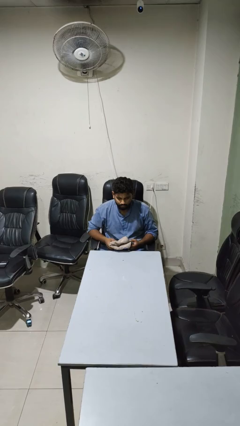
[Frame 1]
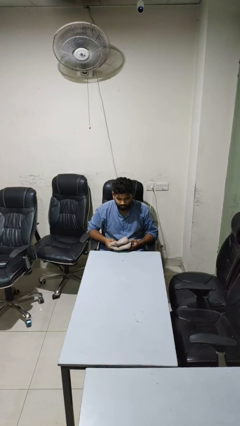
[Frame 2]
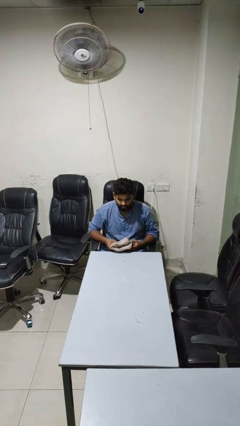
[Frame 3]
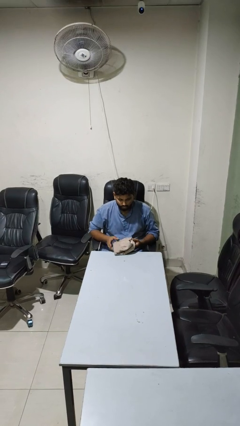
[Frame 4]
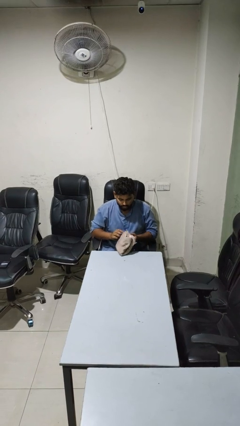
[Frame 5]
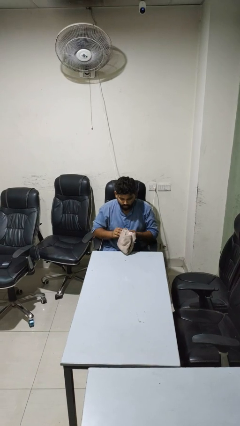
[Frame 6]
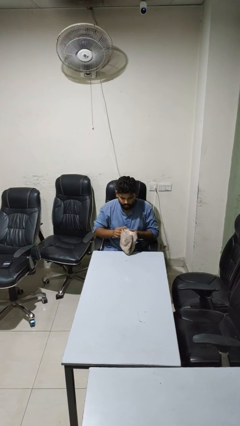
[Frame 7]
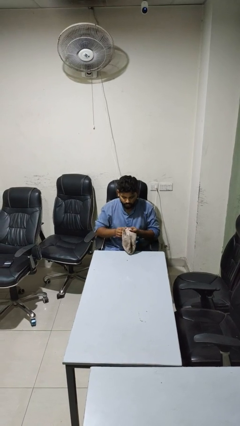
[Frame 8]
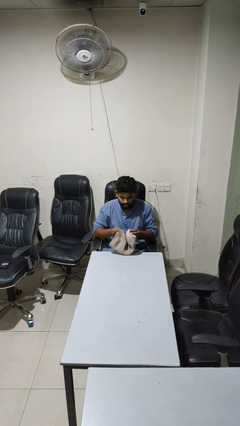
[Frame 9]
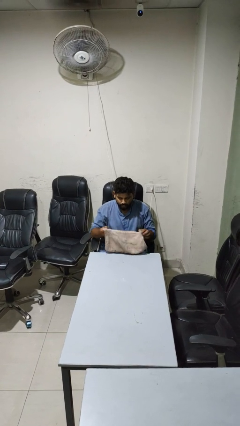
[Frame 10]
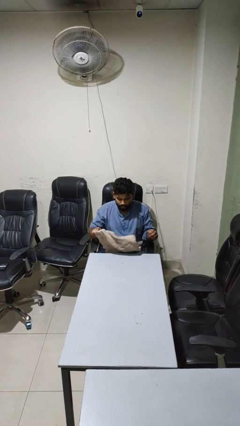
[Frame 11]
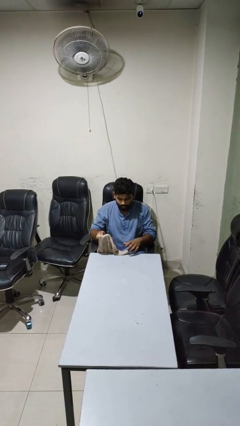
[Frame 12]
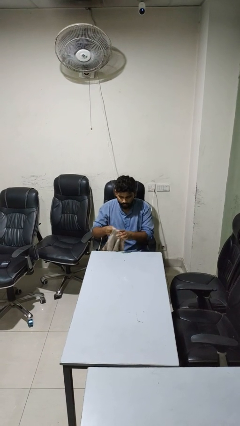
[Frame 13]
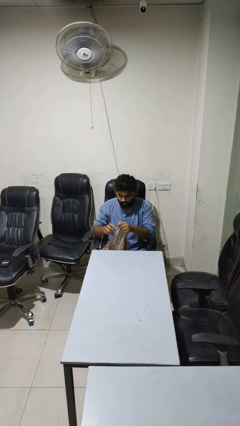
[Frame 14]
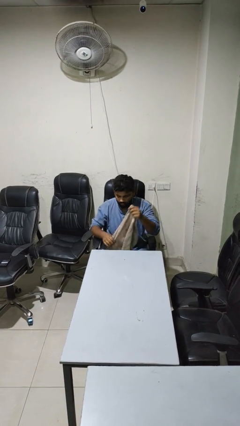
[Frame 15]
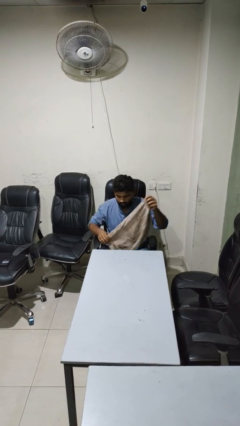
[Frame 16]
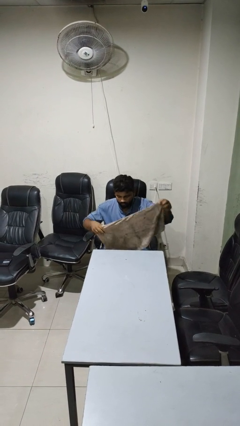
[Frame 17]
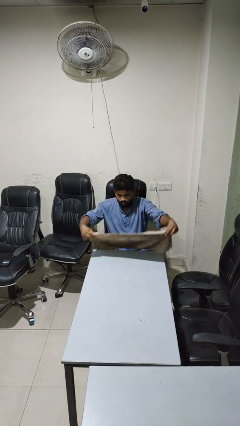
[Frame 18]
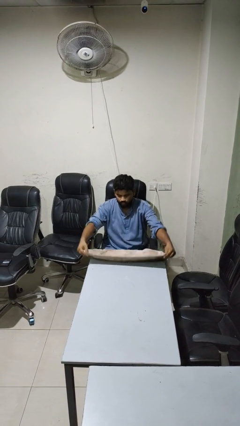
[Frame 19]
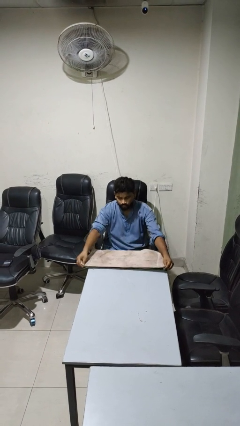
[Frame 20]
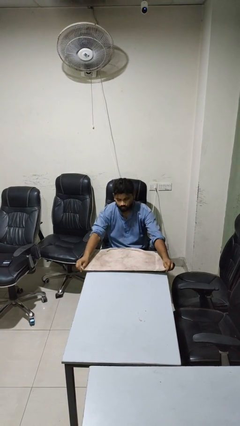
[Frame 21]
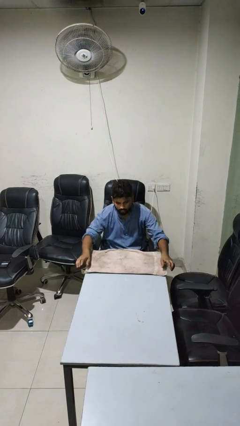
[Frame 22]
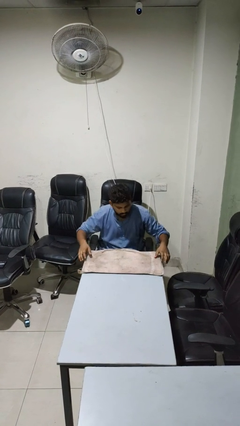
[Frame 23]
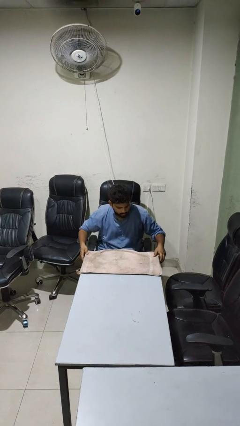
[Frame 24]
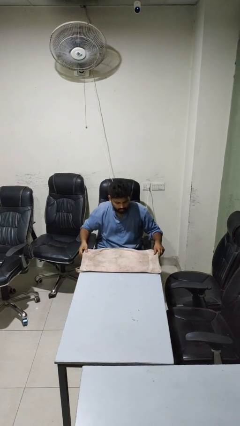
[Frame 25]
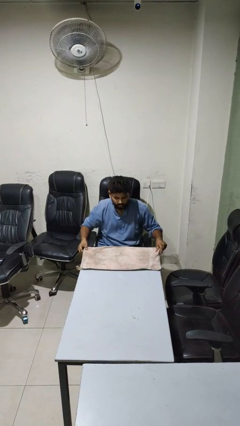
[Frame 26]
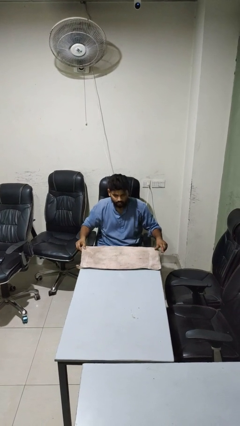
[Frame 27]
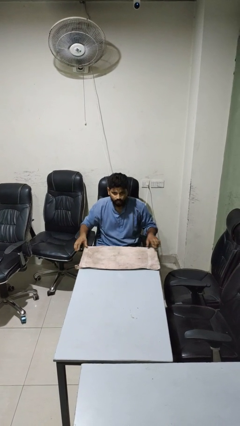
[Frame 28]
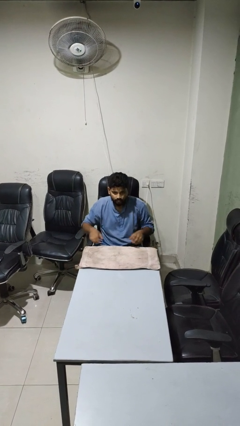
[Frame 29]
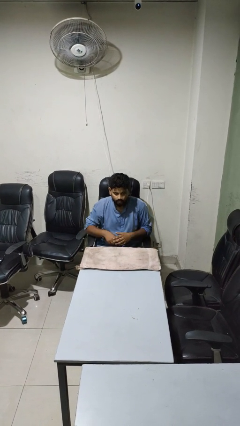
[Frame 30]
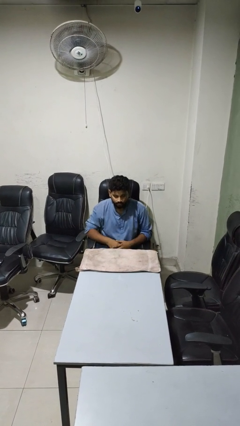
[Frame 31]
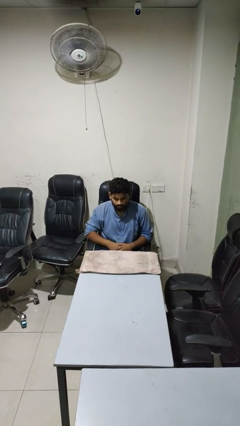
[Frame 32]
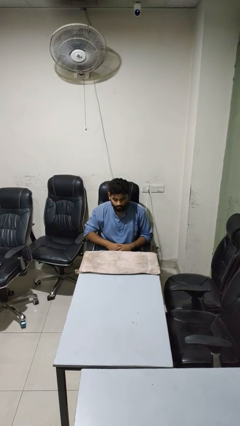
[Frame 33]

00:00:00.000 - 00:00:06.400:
person spreads tablecloth

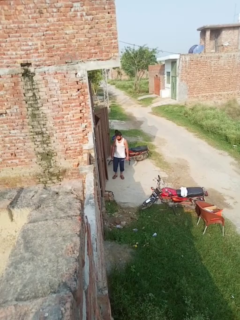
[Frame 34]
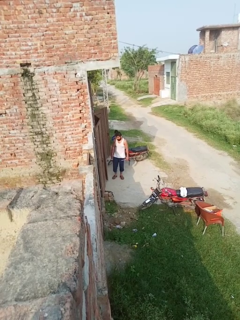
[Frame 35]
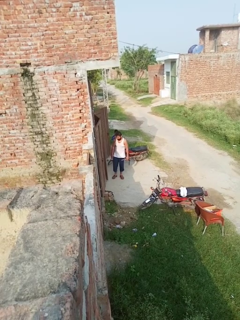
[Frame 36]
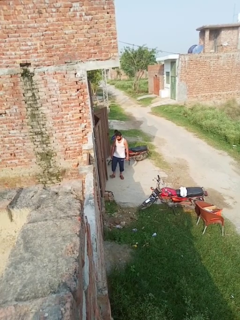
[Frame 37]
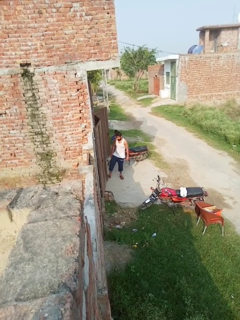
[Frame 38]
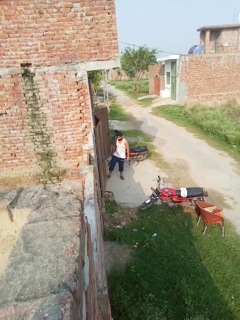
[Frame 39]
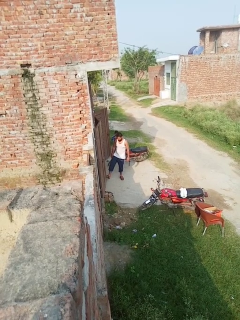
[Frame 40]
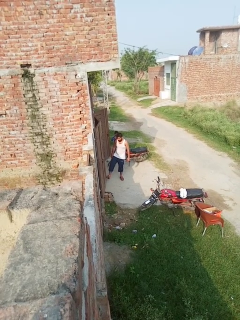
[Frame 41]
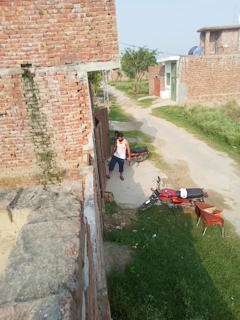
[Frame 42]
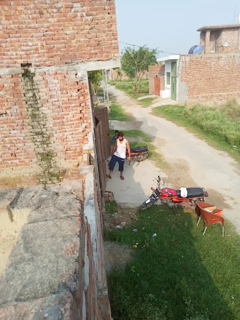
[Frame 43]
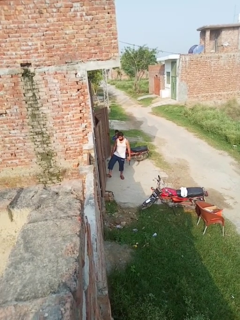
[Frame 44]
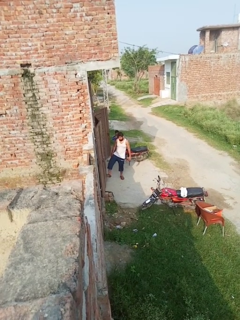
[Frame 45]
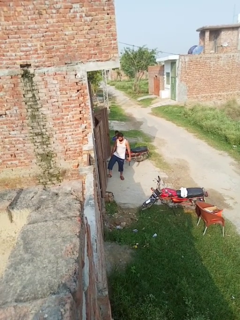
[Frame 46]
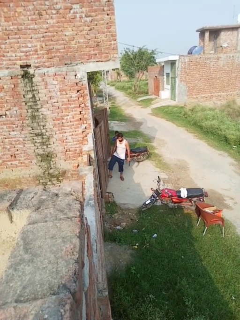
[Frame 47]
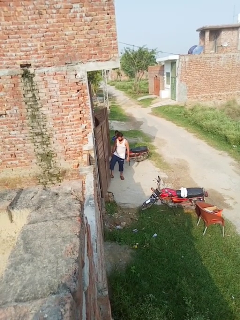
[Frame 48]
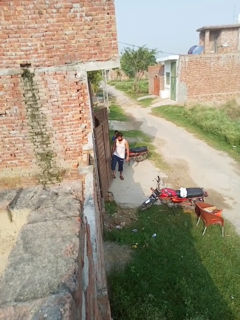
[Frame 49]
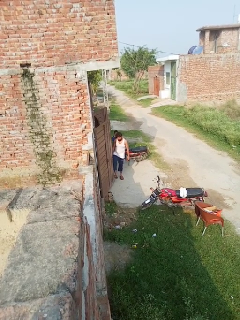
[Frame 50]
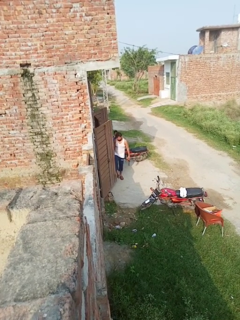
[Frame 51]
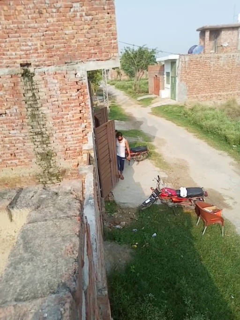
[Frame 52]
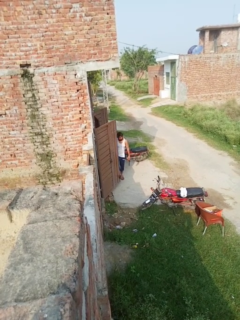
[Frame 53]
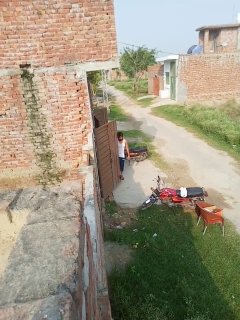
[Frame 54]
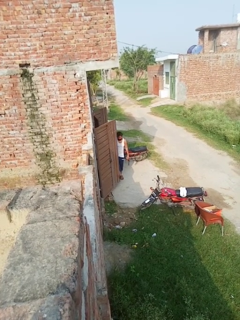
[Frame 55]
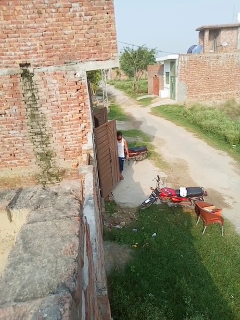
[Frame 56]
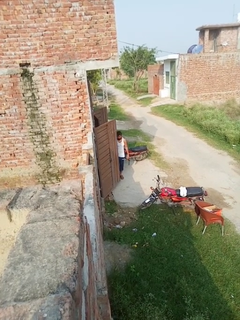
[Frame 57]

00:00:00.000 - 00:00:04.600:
person opens facility door

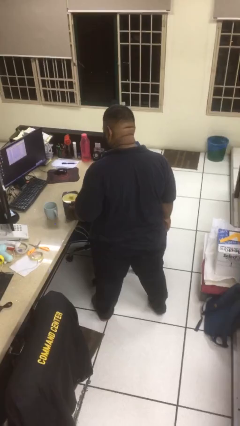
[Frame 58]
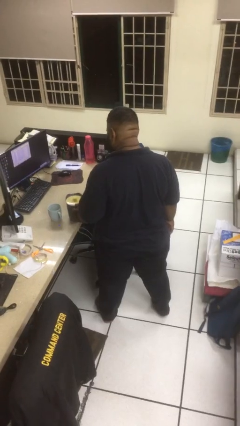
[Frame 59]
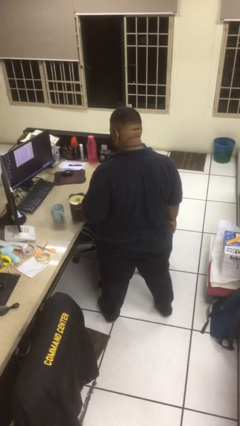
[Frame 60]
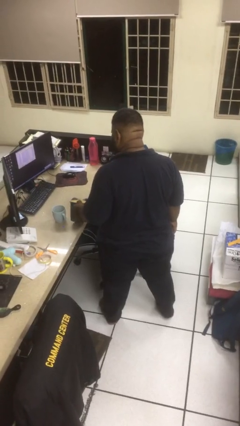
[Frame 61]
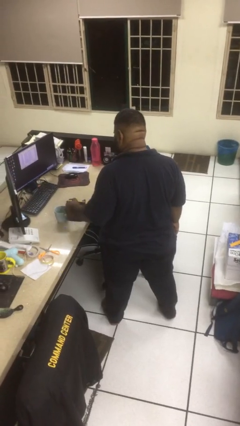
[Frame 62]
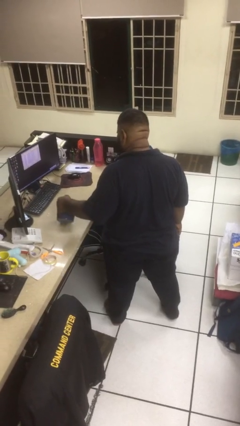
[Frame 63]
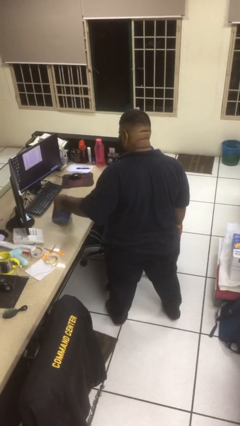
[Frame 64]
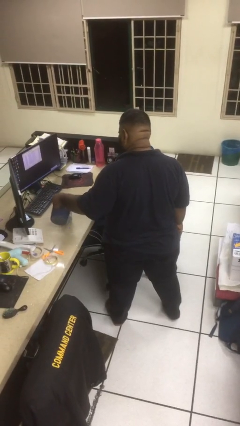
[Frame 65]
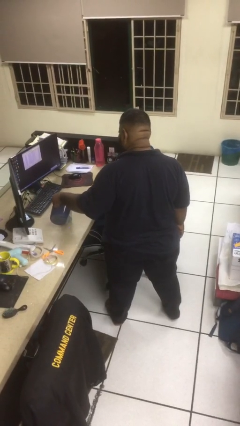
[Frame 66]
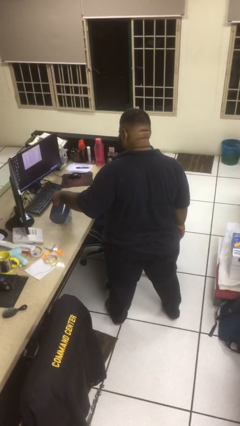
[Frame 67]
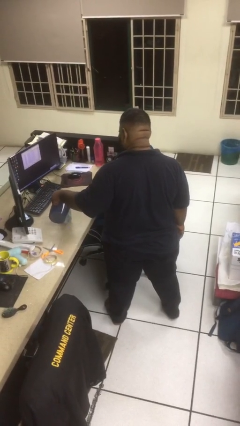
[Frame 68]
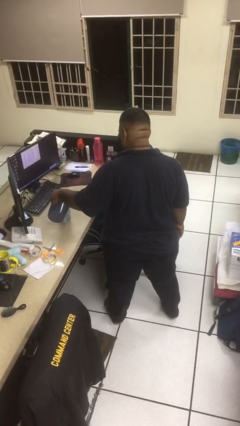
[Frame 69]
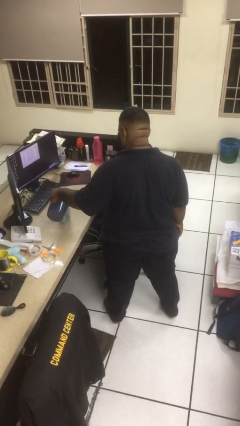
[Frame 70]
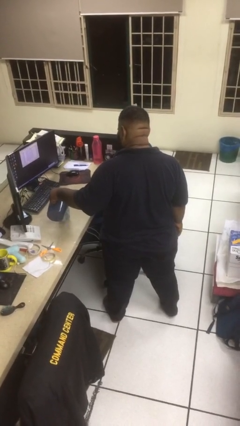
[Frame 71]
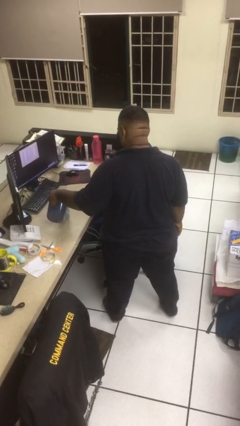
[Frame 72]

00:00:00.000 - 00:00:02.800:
person pours coffee into mug

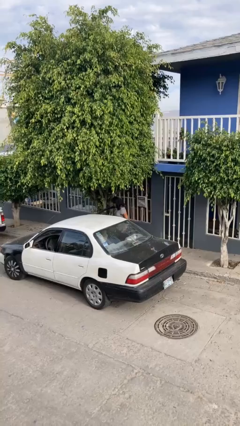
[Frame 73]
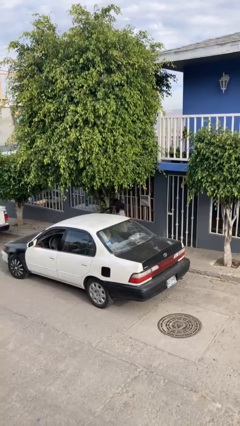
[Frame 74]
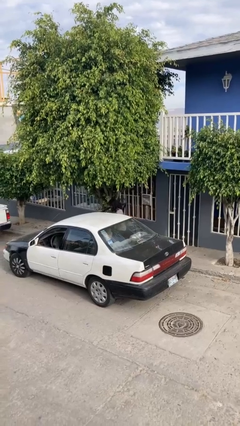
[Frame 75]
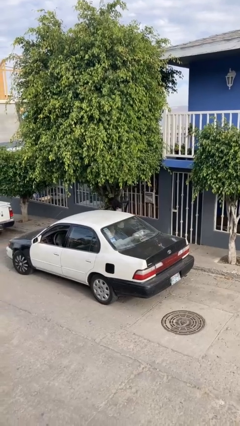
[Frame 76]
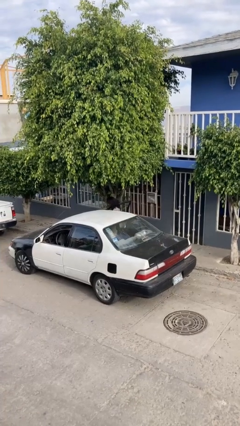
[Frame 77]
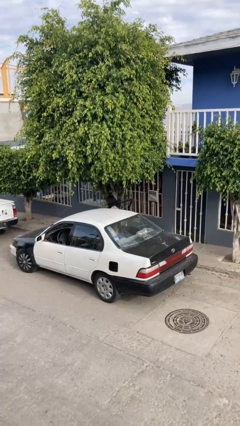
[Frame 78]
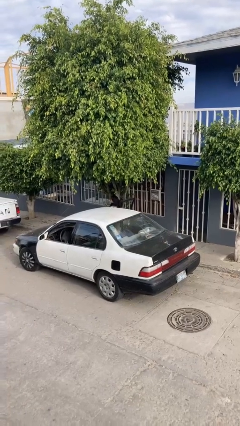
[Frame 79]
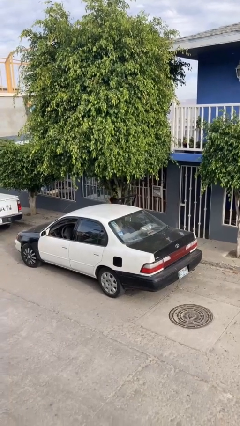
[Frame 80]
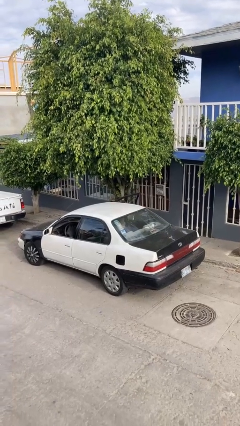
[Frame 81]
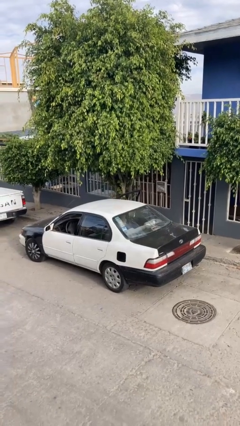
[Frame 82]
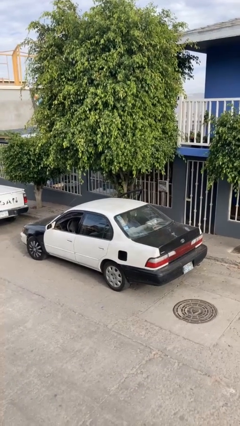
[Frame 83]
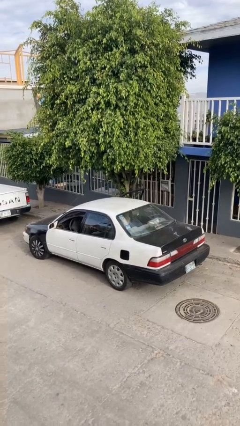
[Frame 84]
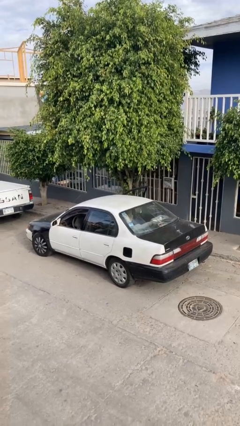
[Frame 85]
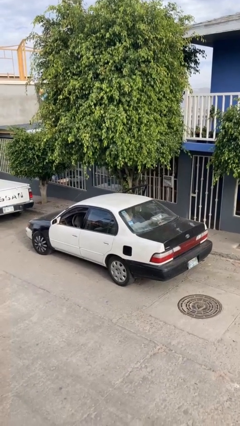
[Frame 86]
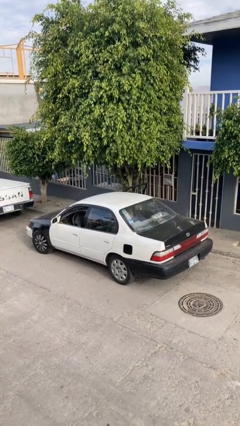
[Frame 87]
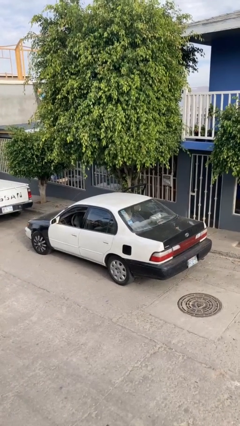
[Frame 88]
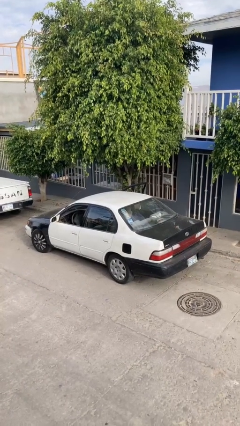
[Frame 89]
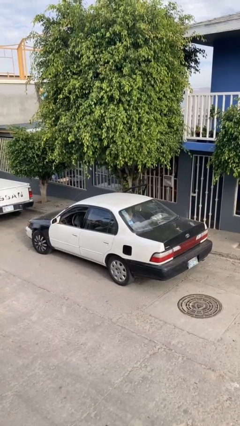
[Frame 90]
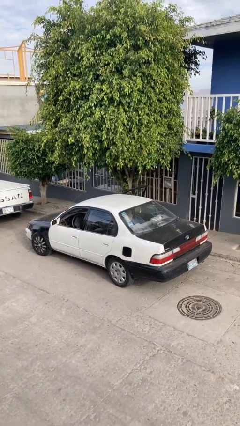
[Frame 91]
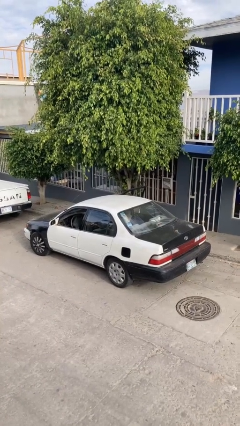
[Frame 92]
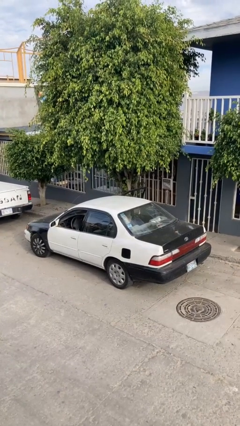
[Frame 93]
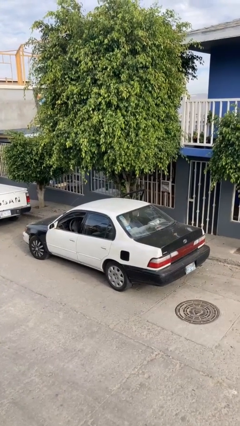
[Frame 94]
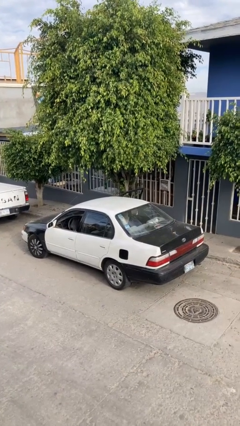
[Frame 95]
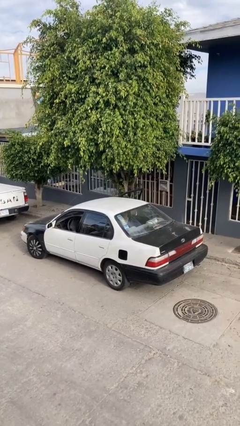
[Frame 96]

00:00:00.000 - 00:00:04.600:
person enters car

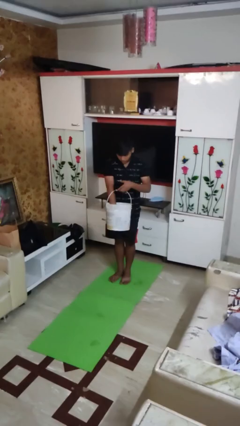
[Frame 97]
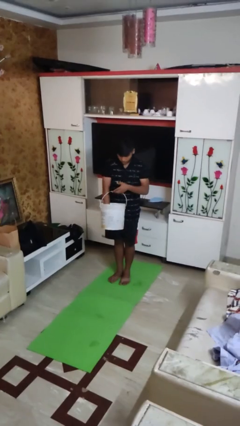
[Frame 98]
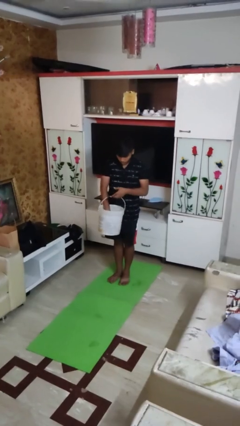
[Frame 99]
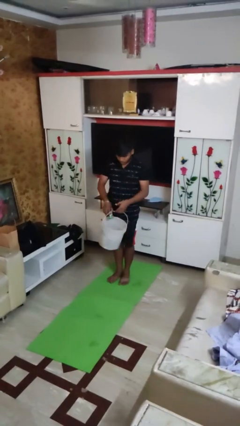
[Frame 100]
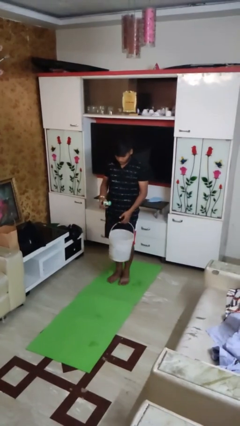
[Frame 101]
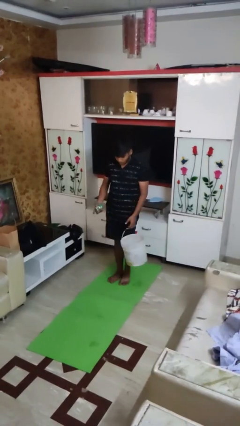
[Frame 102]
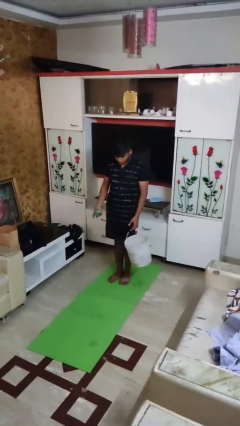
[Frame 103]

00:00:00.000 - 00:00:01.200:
person takes object from basket
